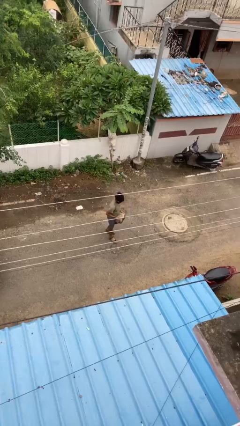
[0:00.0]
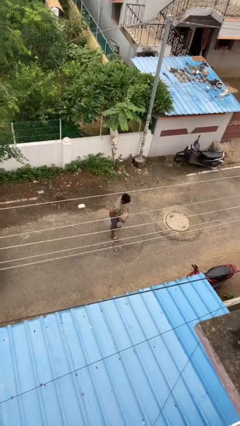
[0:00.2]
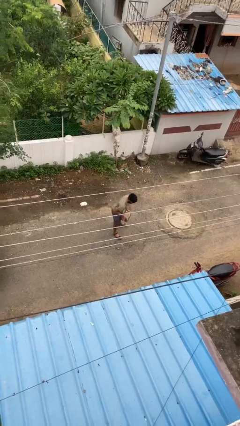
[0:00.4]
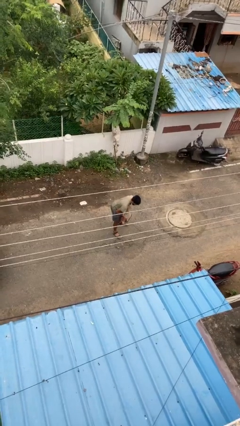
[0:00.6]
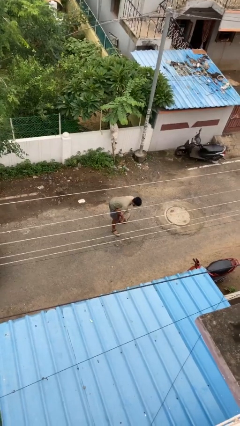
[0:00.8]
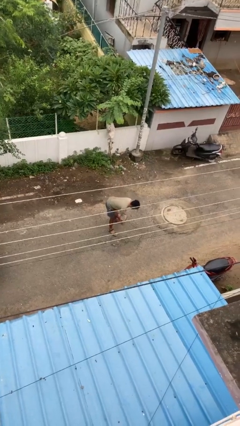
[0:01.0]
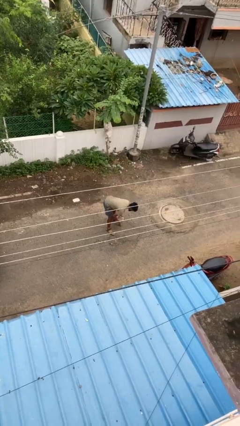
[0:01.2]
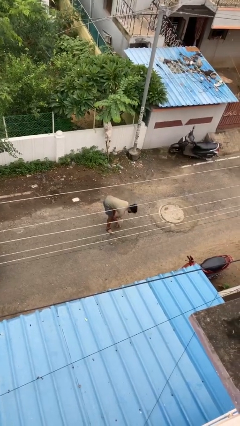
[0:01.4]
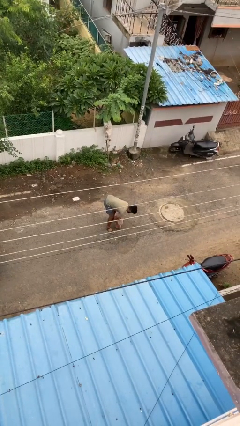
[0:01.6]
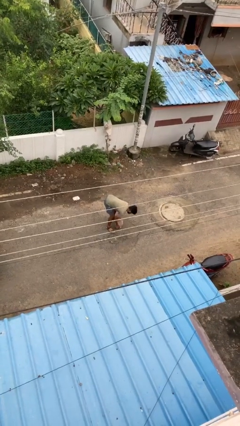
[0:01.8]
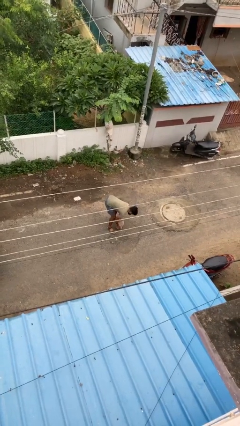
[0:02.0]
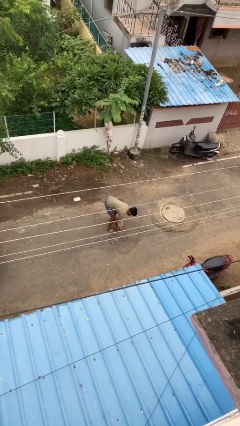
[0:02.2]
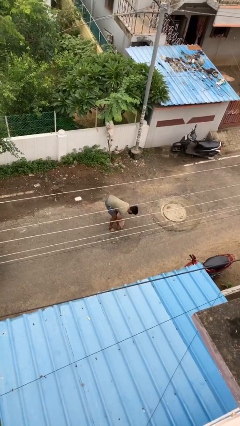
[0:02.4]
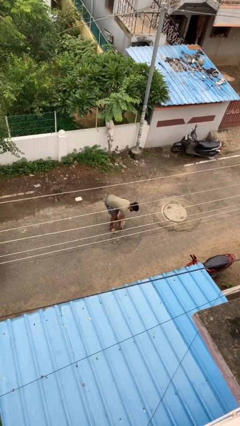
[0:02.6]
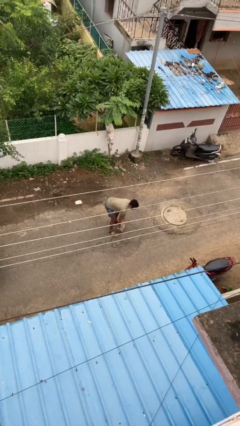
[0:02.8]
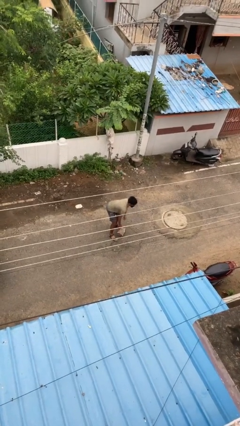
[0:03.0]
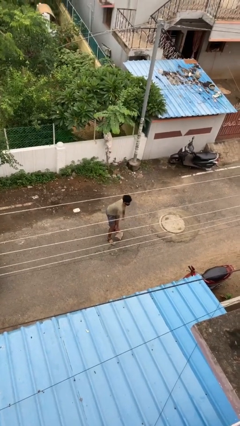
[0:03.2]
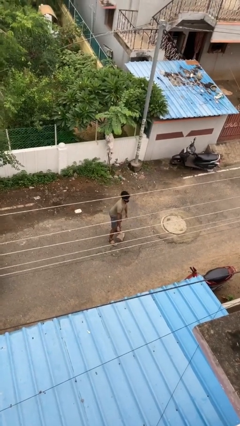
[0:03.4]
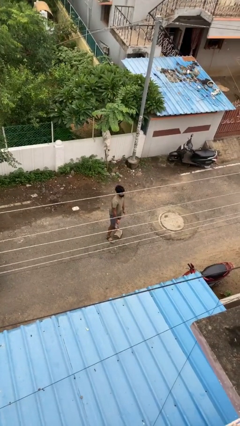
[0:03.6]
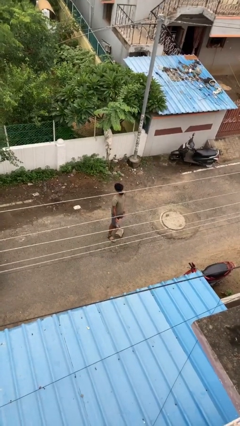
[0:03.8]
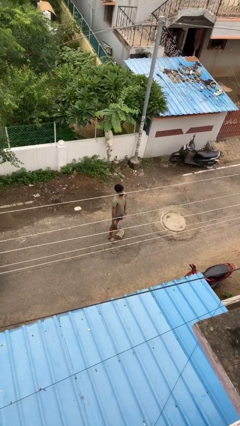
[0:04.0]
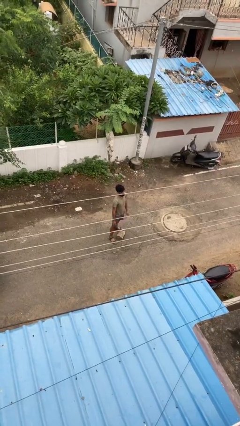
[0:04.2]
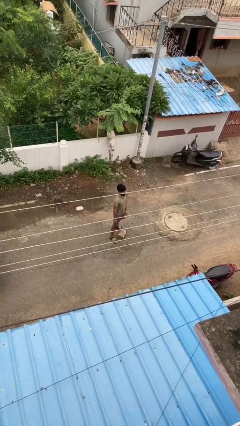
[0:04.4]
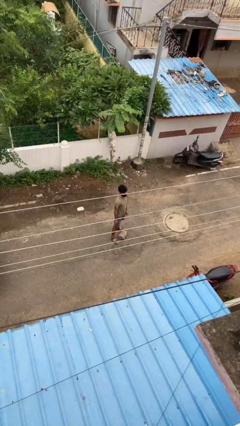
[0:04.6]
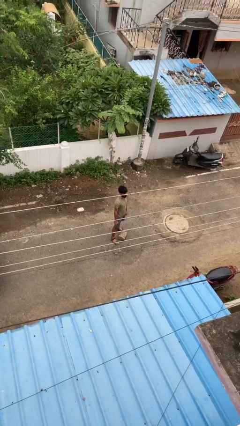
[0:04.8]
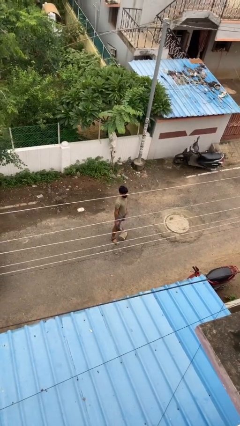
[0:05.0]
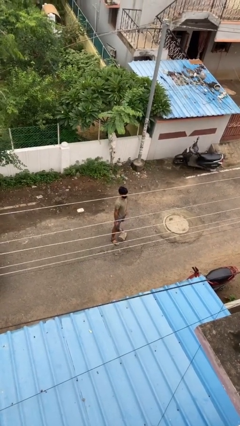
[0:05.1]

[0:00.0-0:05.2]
person puts down object on floor

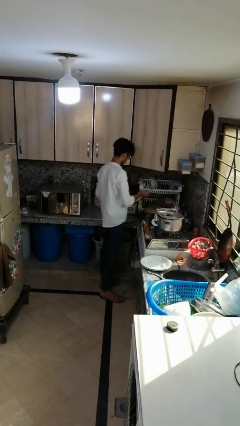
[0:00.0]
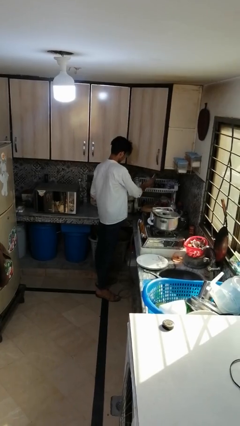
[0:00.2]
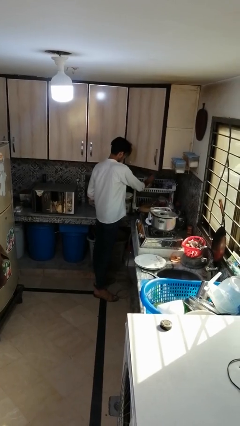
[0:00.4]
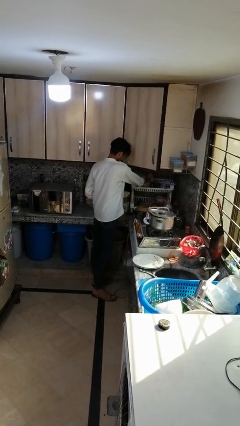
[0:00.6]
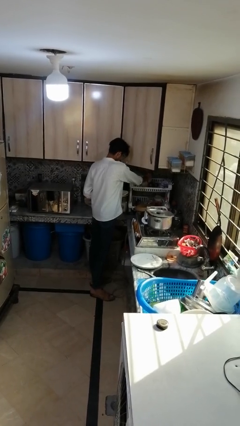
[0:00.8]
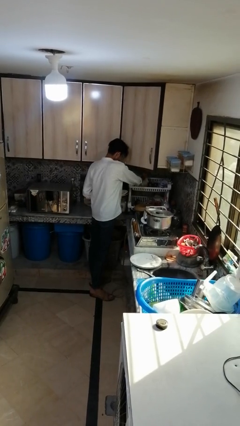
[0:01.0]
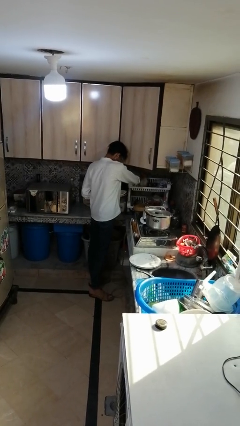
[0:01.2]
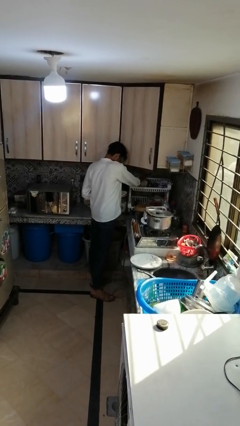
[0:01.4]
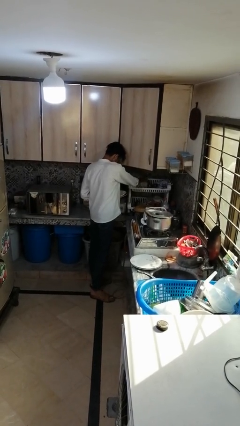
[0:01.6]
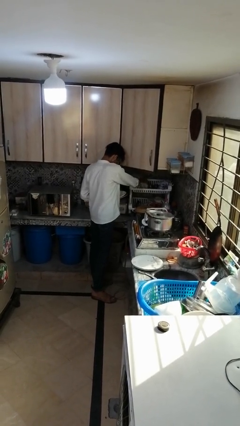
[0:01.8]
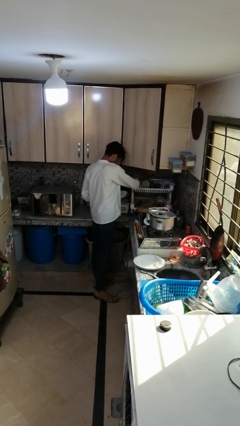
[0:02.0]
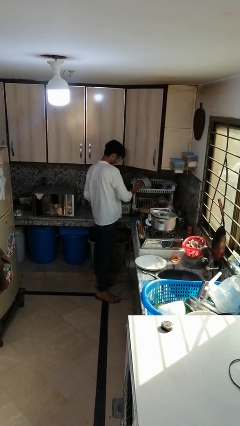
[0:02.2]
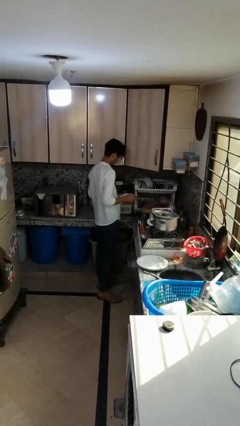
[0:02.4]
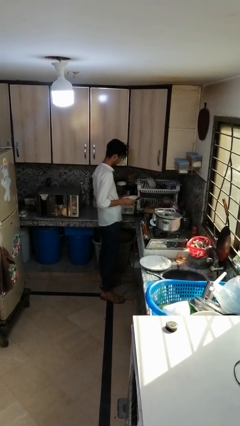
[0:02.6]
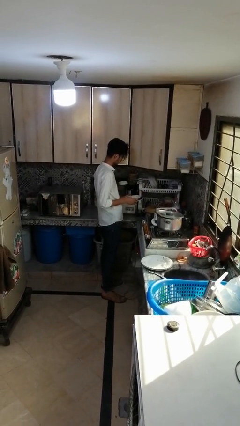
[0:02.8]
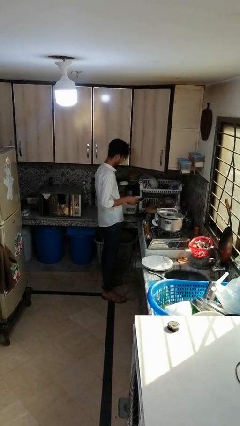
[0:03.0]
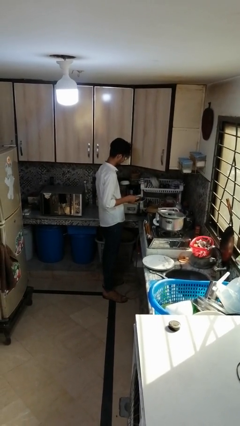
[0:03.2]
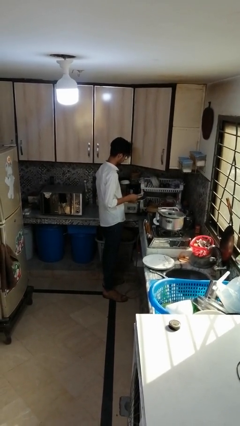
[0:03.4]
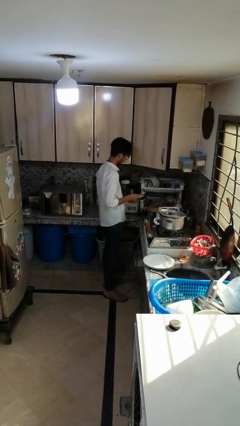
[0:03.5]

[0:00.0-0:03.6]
person loads dishwasher

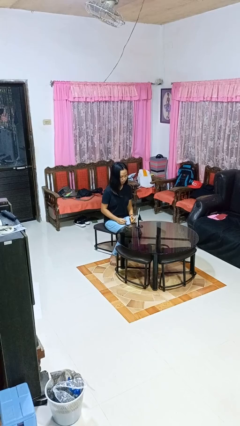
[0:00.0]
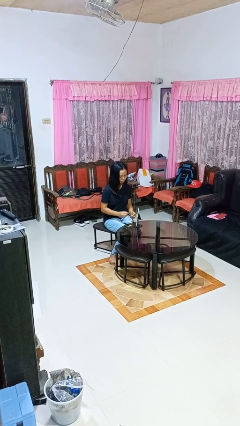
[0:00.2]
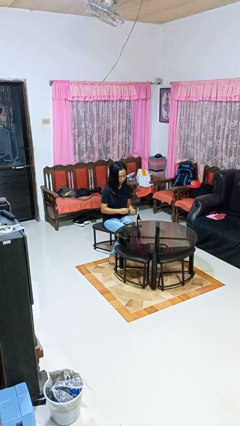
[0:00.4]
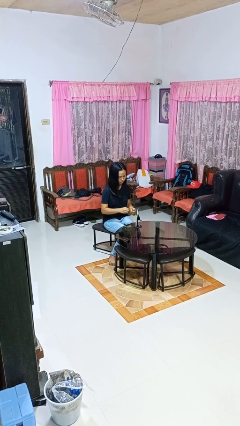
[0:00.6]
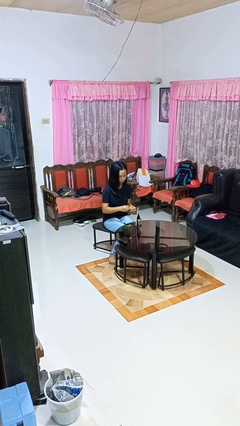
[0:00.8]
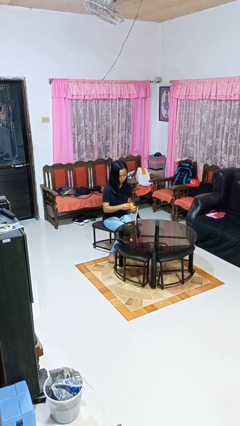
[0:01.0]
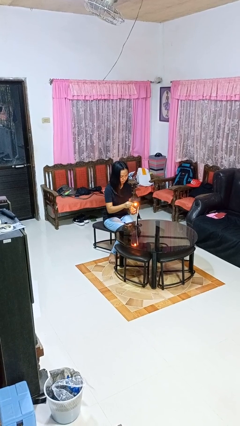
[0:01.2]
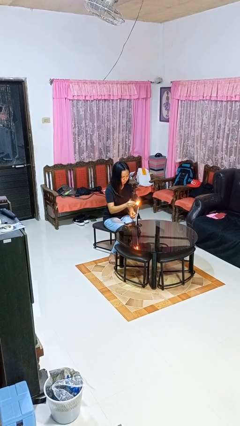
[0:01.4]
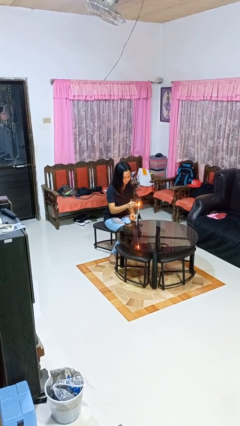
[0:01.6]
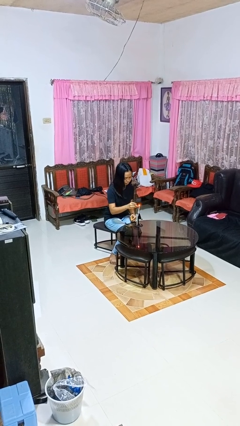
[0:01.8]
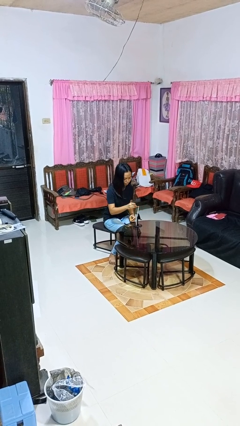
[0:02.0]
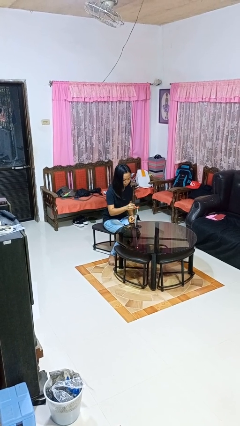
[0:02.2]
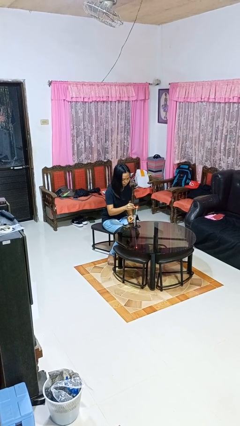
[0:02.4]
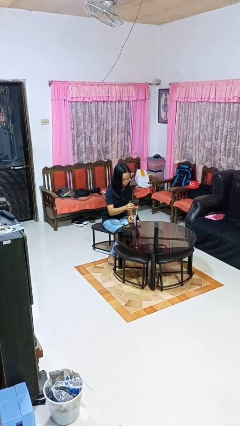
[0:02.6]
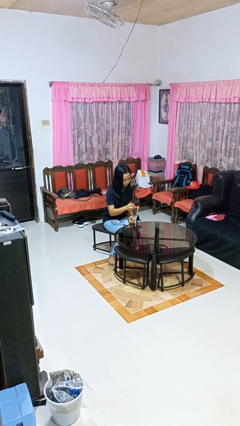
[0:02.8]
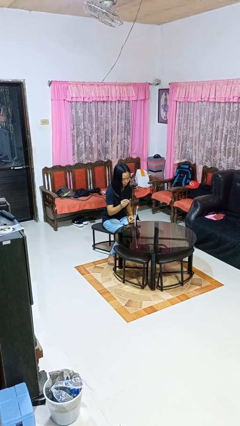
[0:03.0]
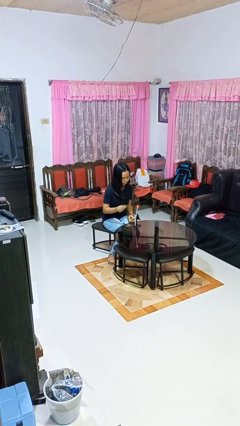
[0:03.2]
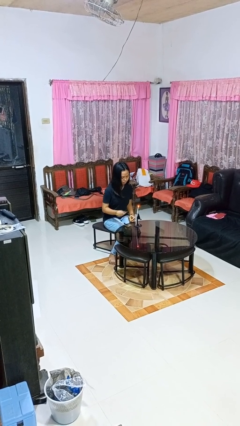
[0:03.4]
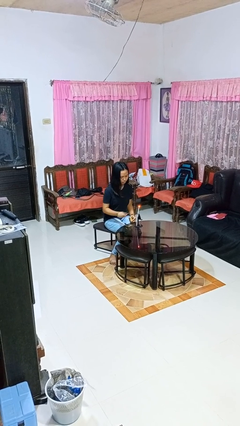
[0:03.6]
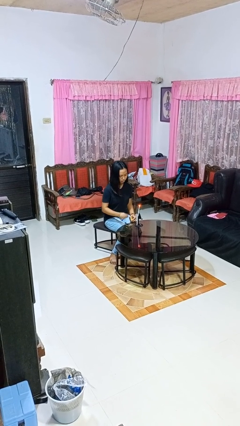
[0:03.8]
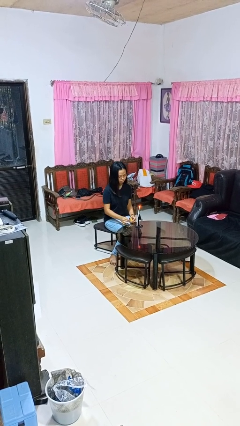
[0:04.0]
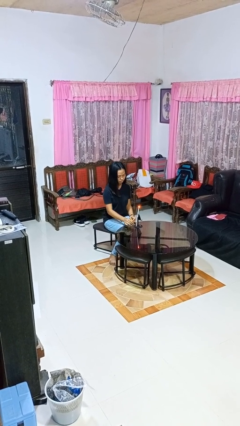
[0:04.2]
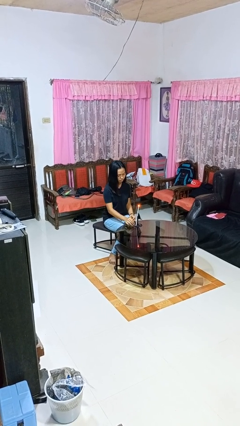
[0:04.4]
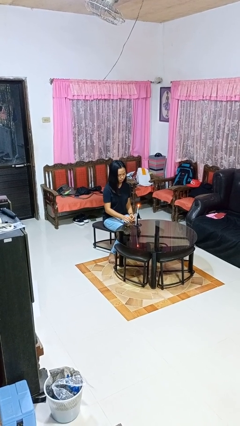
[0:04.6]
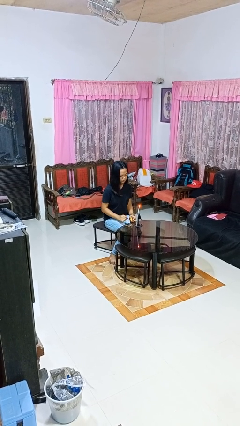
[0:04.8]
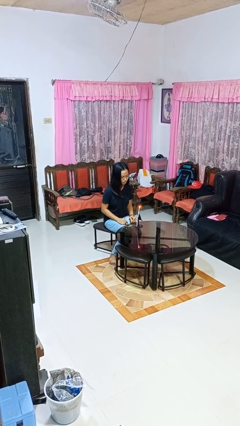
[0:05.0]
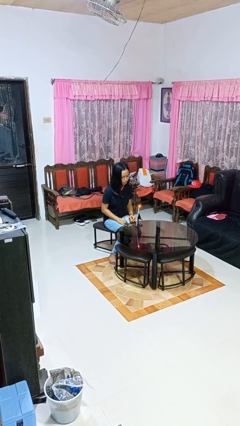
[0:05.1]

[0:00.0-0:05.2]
person lights candle

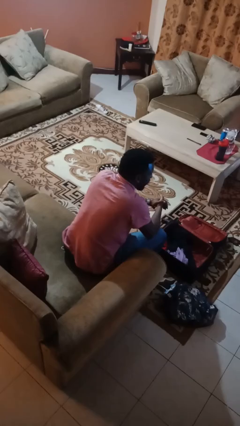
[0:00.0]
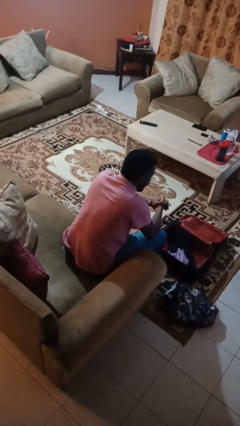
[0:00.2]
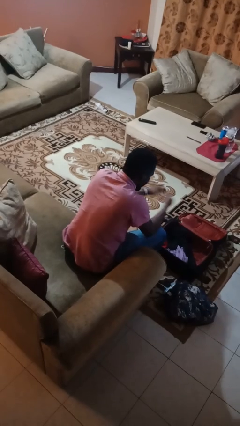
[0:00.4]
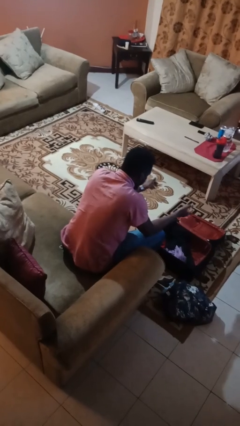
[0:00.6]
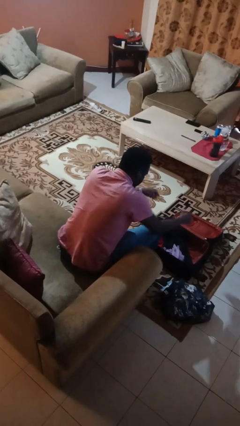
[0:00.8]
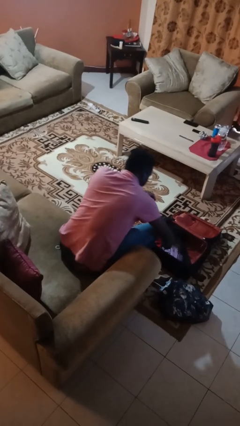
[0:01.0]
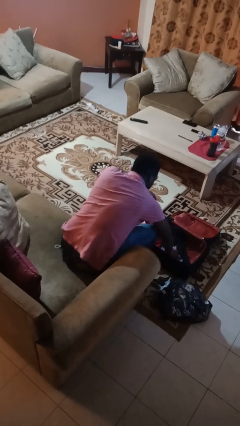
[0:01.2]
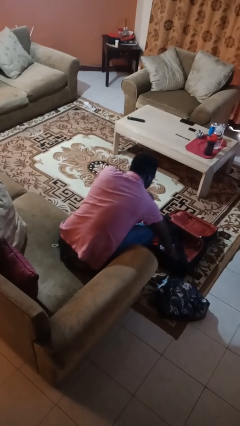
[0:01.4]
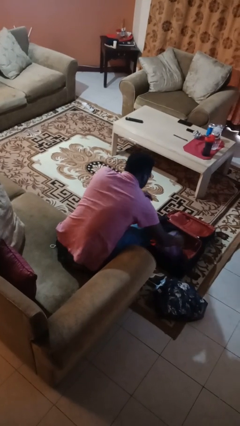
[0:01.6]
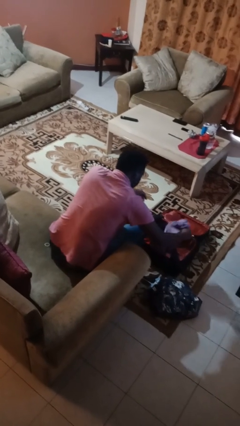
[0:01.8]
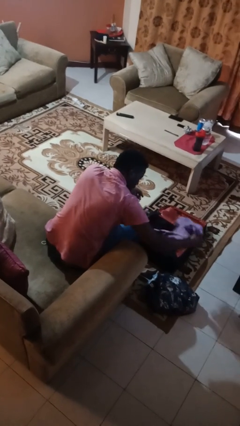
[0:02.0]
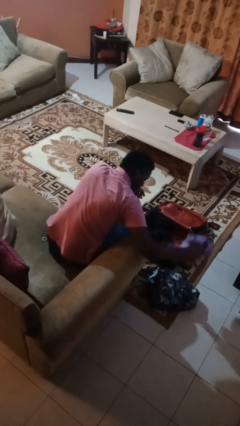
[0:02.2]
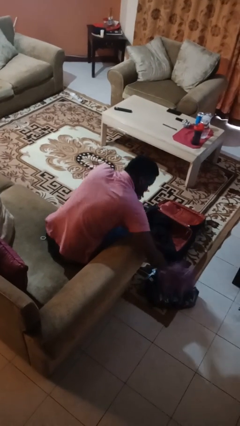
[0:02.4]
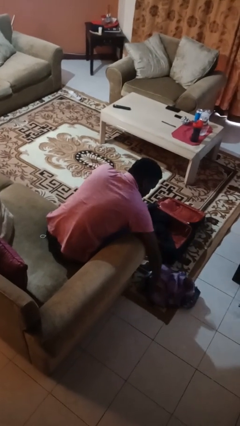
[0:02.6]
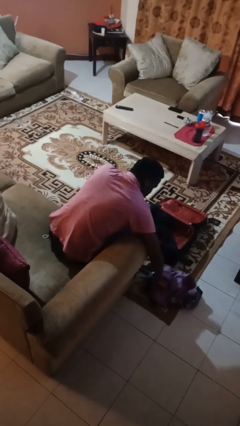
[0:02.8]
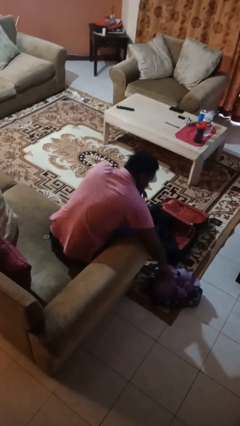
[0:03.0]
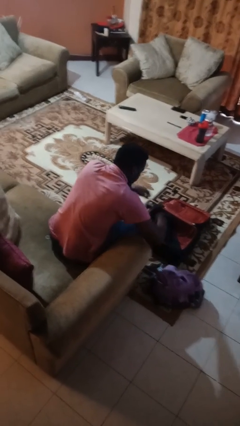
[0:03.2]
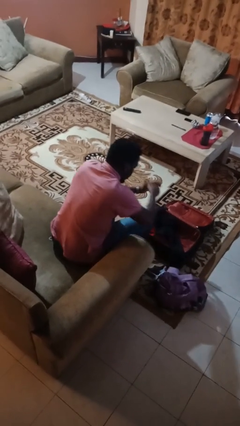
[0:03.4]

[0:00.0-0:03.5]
person unloads clothes from suitcase
